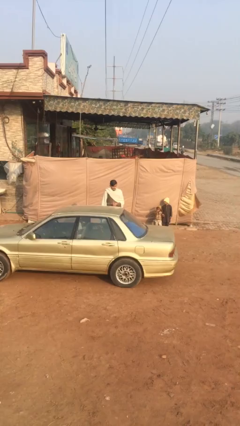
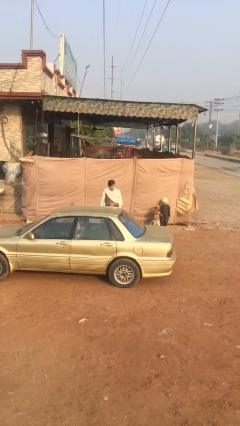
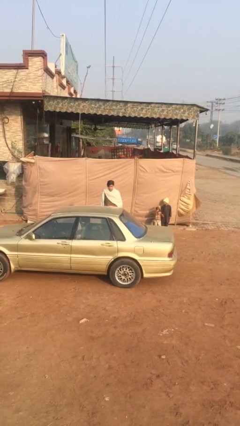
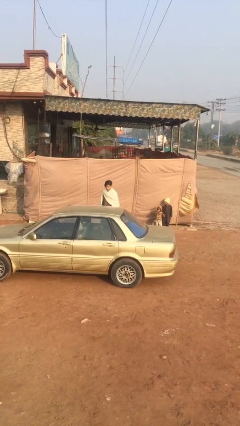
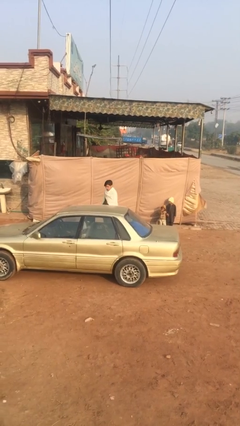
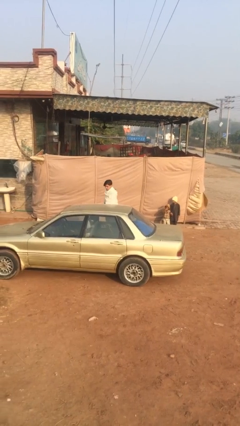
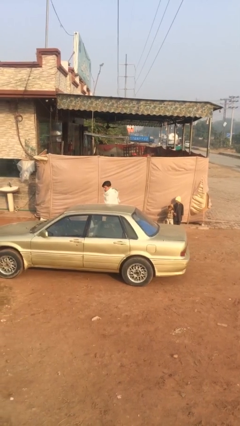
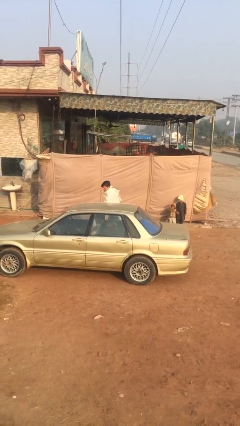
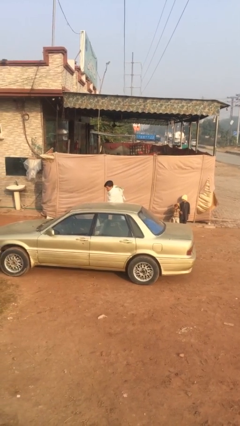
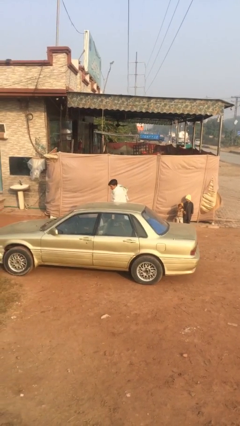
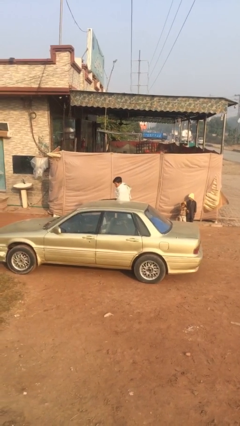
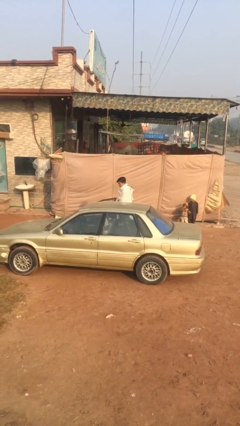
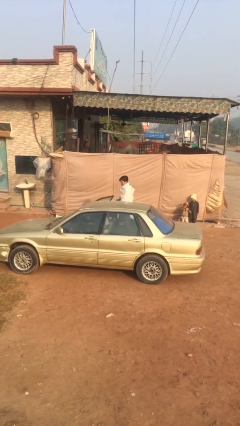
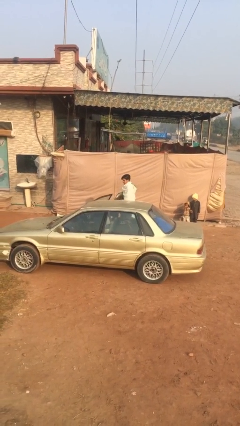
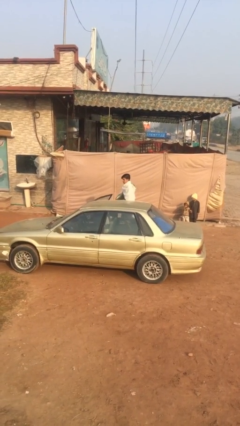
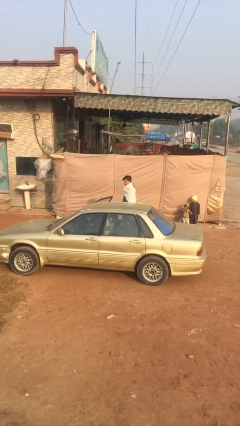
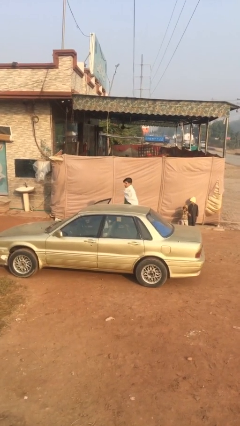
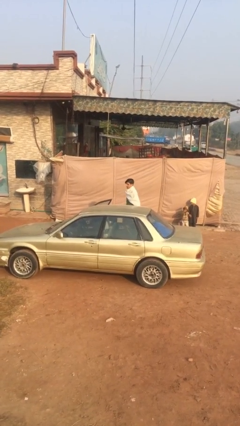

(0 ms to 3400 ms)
person opens car door

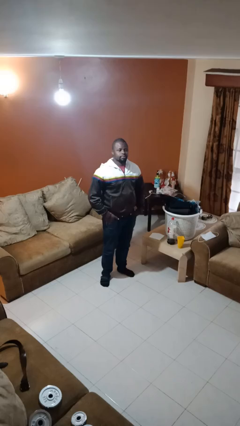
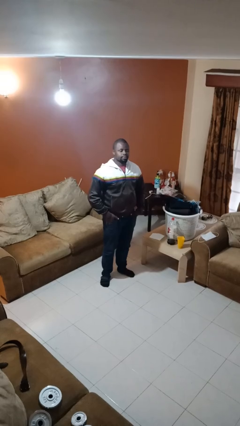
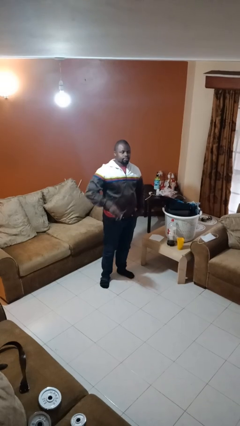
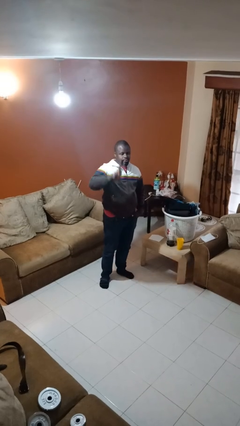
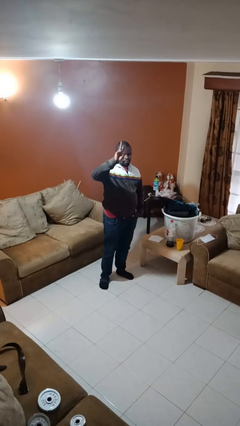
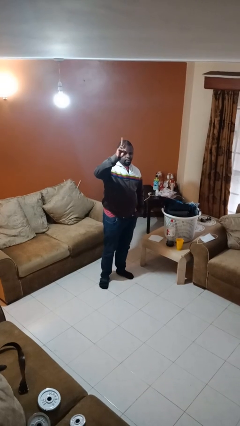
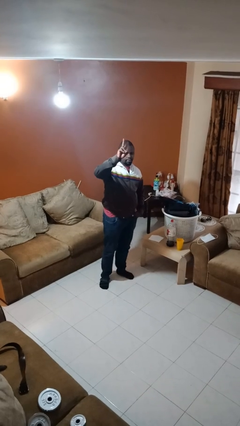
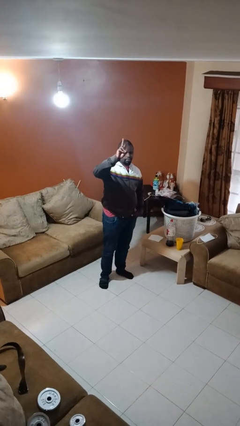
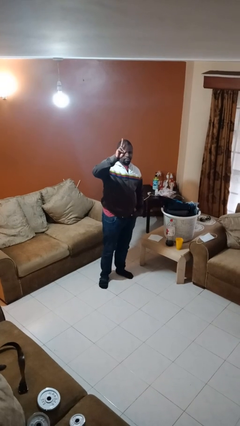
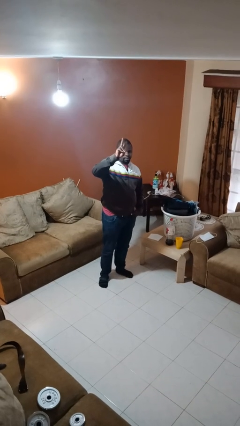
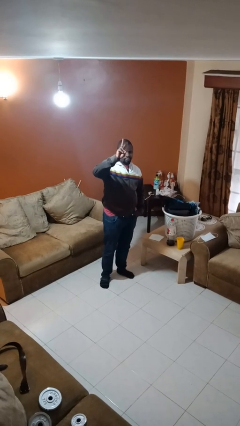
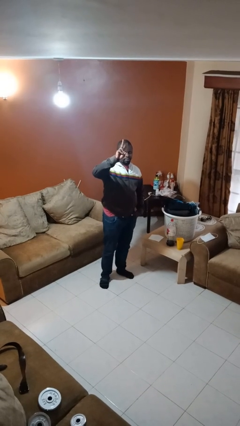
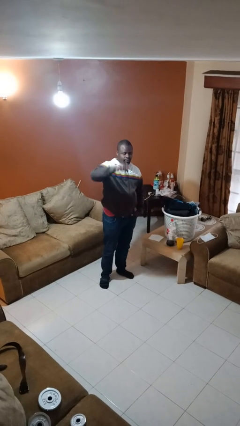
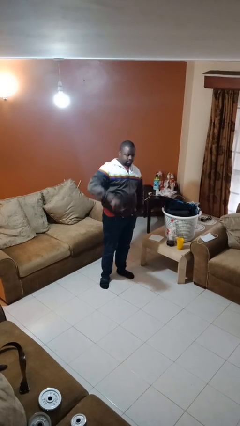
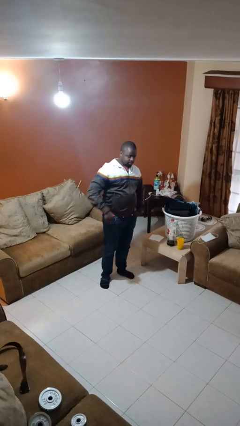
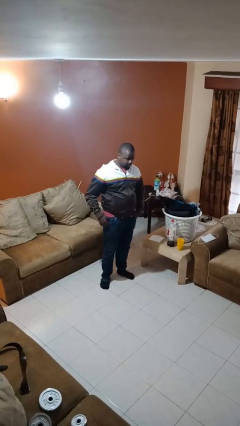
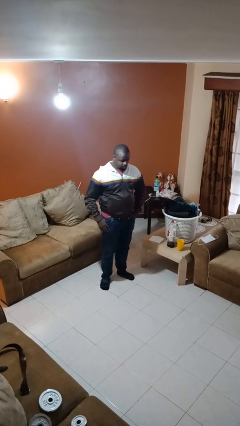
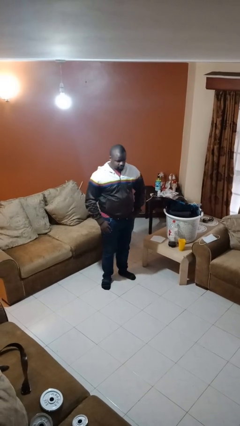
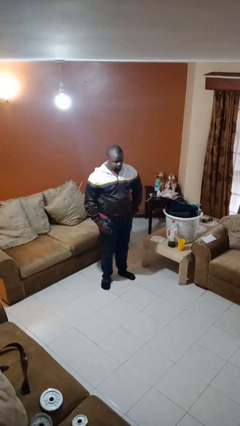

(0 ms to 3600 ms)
person gestures peace

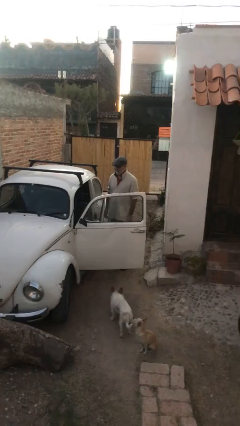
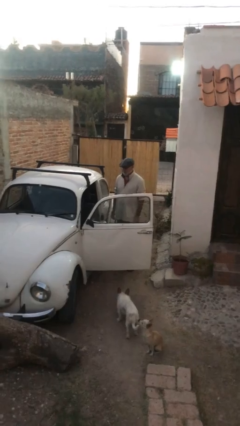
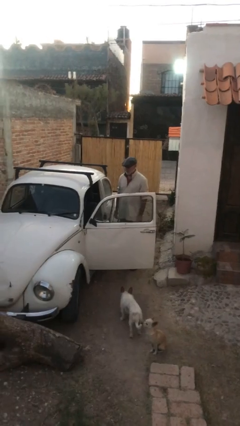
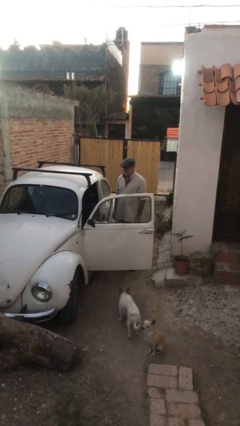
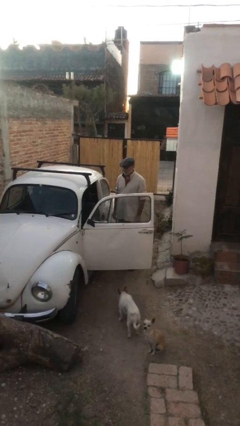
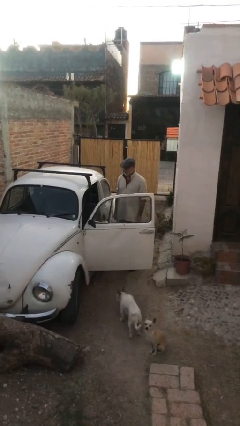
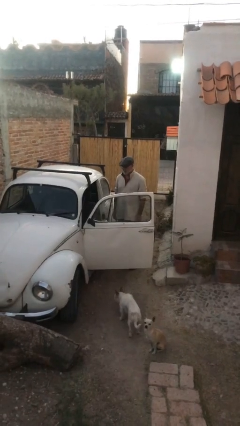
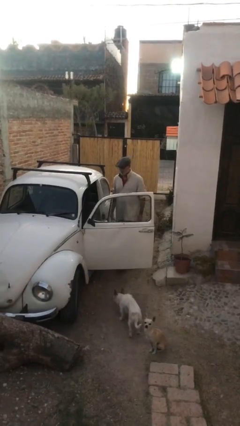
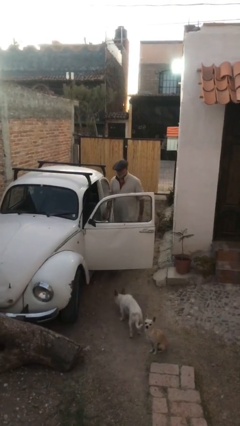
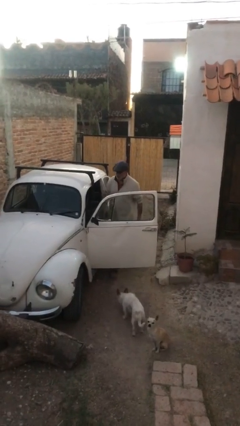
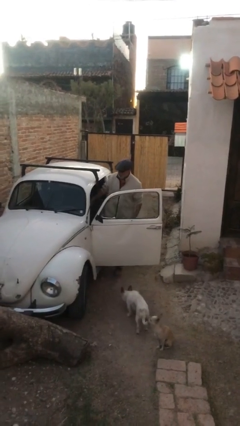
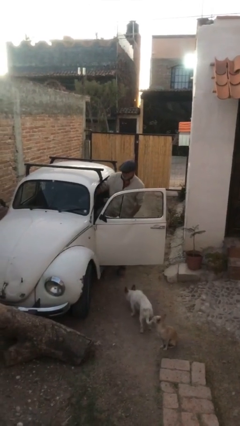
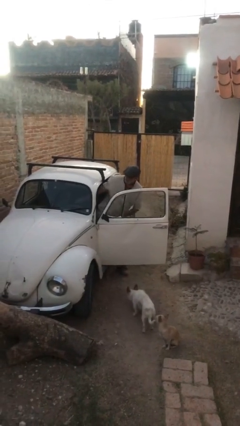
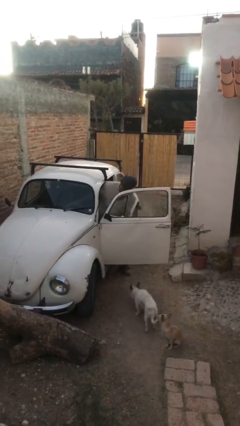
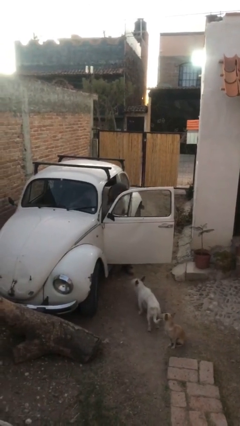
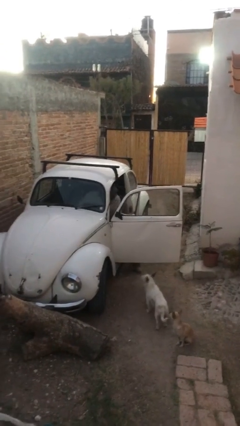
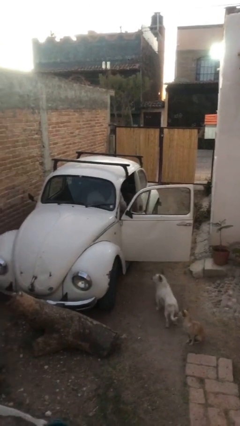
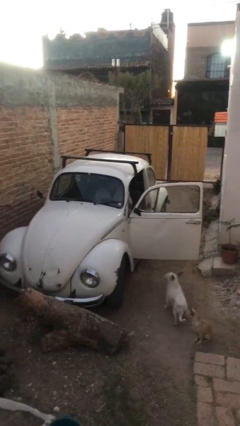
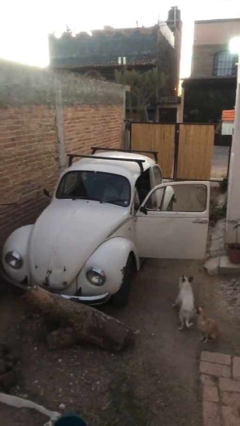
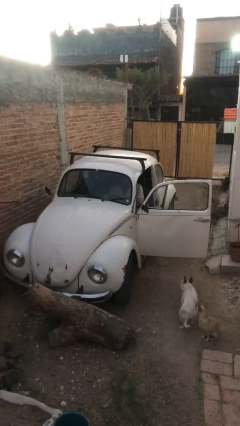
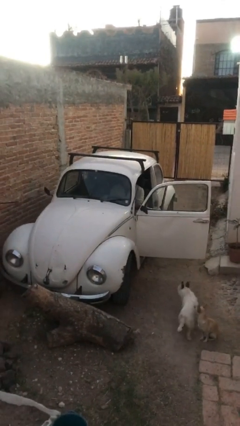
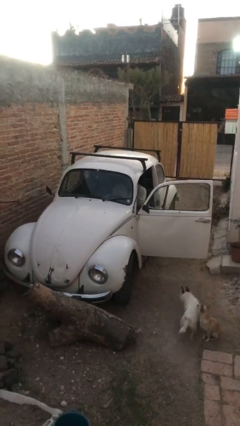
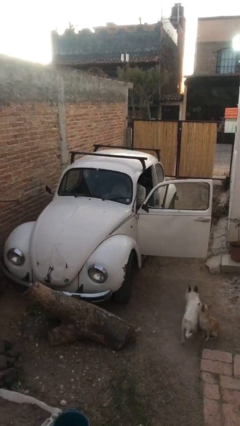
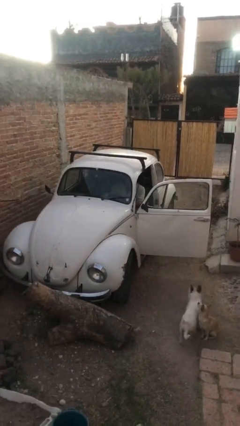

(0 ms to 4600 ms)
person enters car

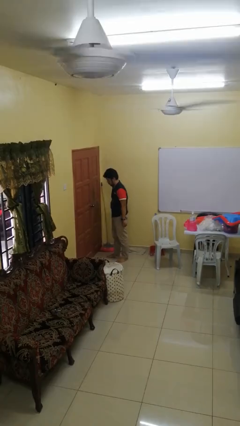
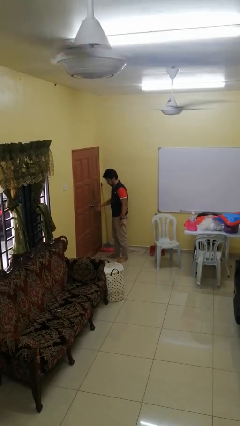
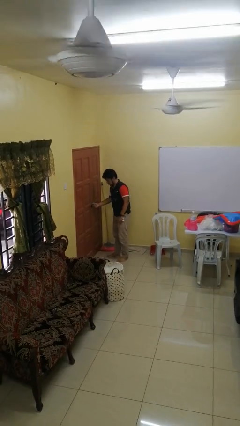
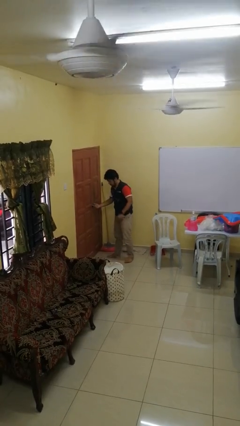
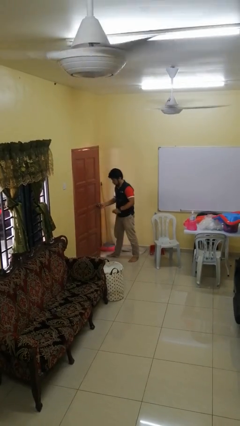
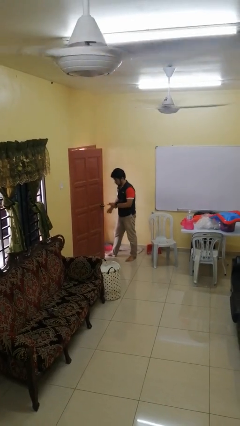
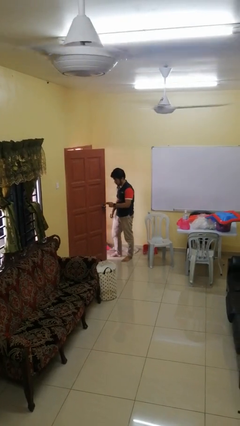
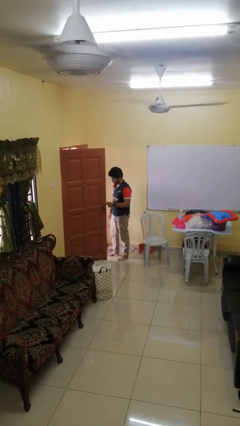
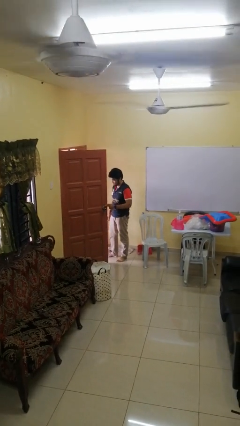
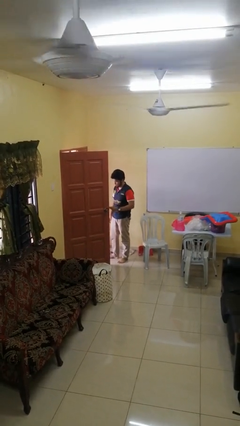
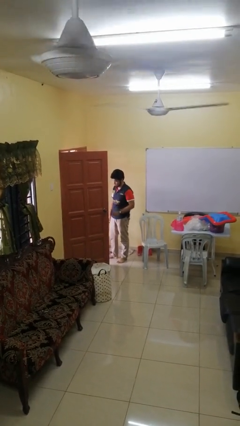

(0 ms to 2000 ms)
person opens facility door

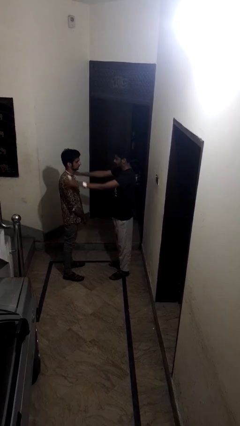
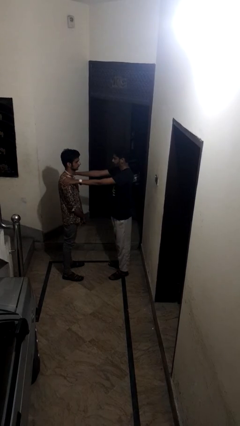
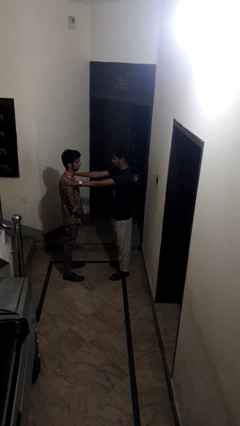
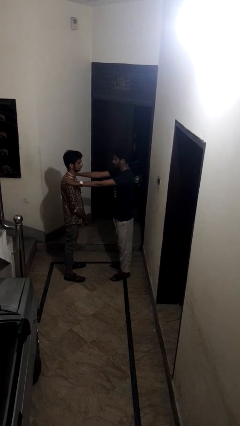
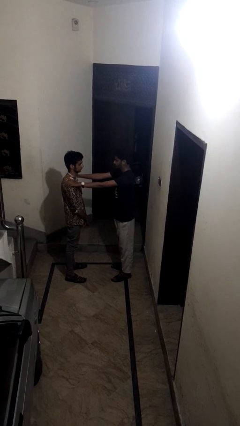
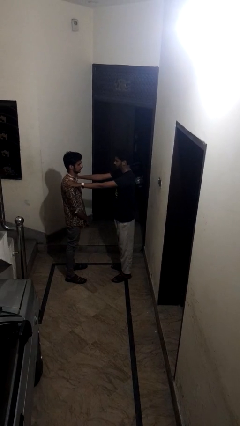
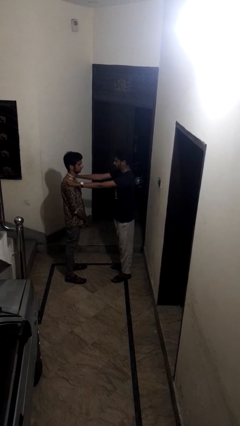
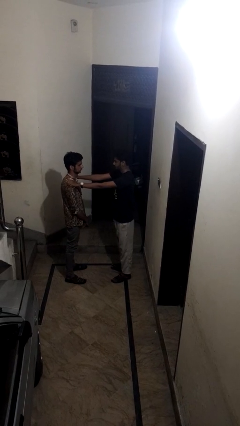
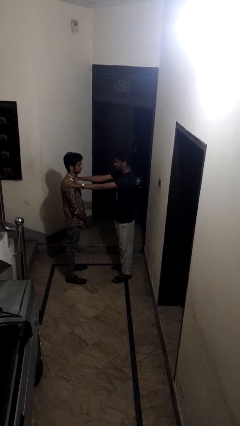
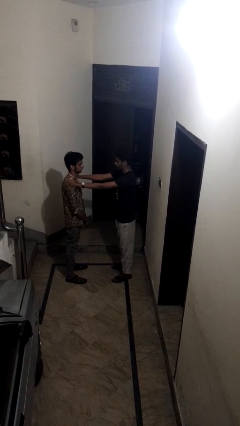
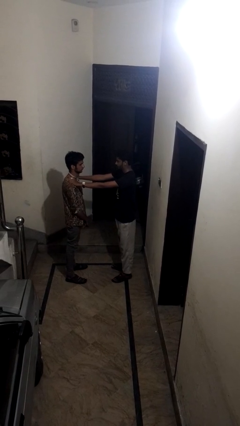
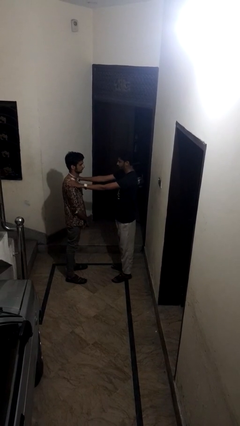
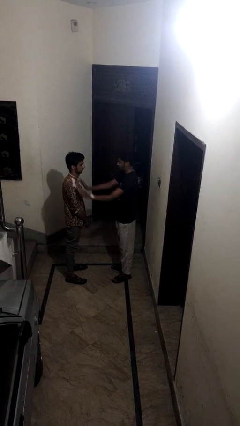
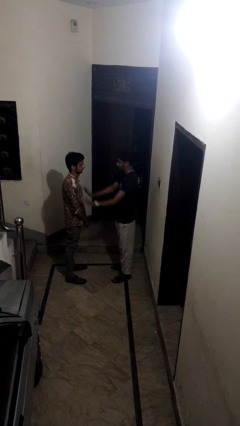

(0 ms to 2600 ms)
person pounds shoulders of person

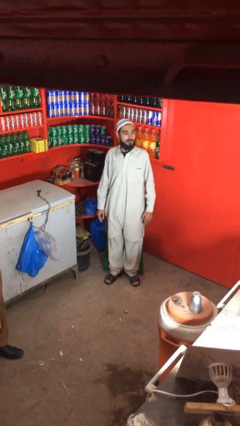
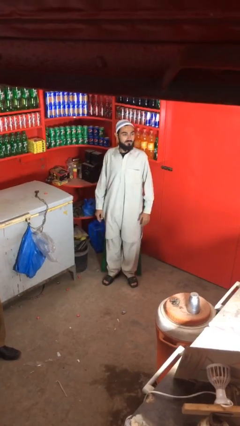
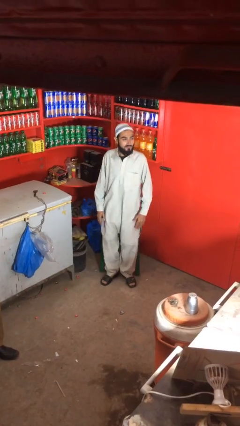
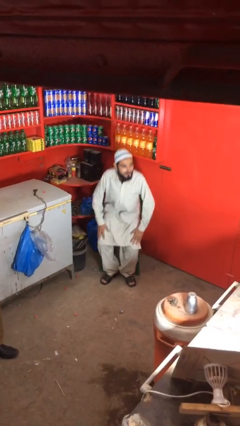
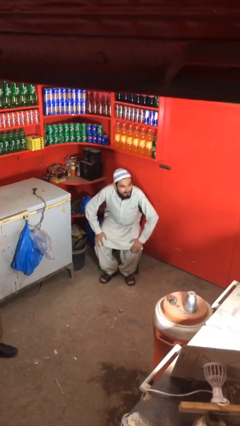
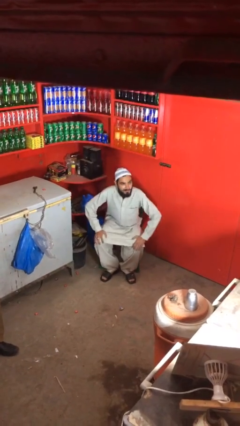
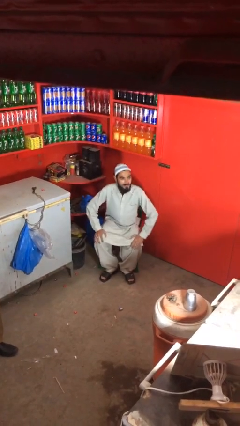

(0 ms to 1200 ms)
person sits down
